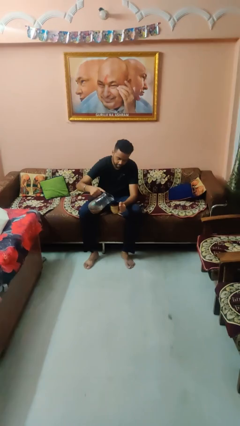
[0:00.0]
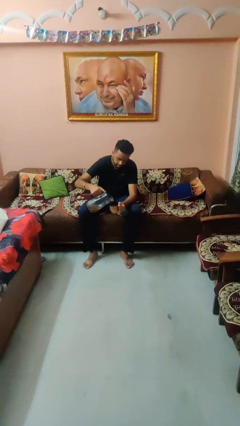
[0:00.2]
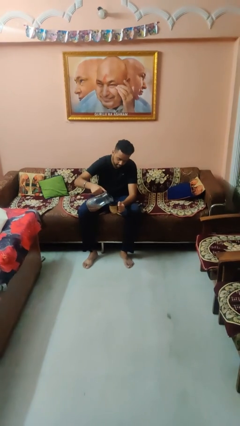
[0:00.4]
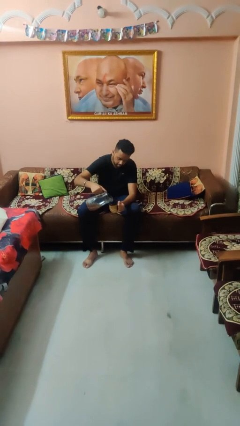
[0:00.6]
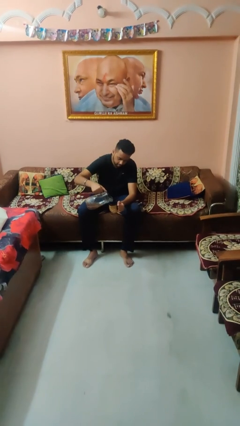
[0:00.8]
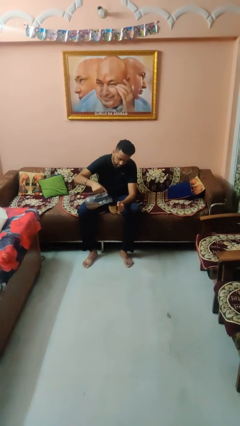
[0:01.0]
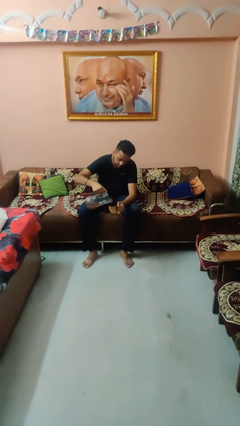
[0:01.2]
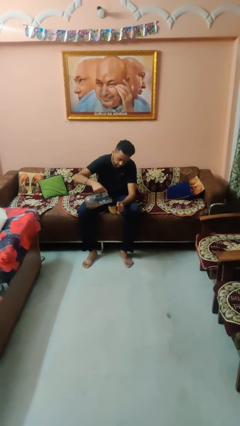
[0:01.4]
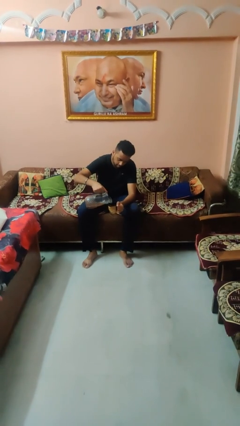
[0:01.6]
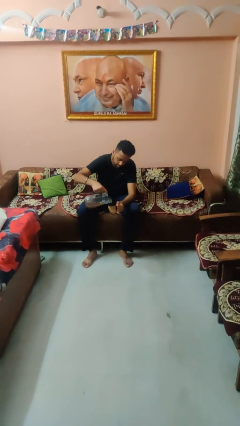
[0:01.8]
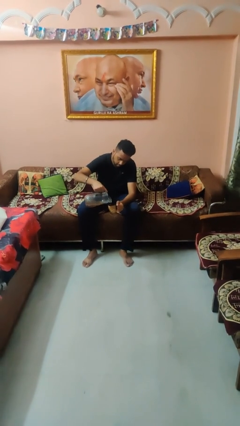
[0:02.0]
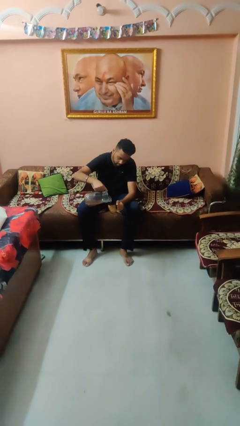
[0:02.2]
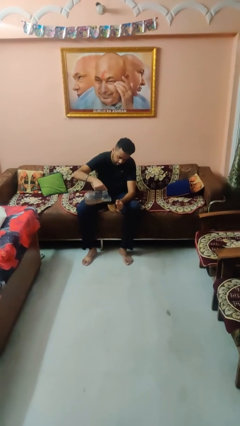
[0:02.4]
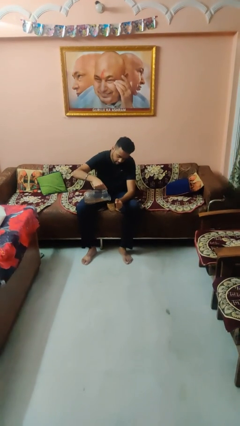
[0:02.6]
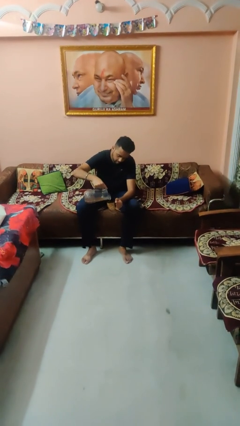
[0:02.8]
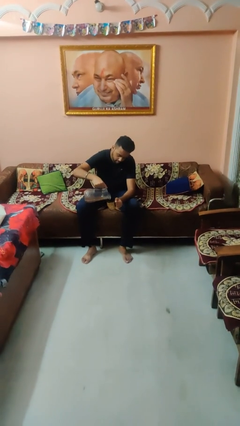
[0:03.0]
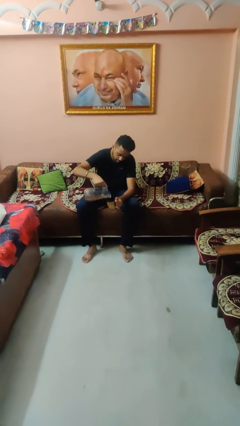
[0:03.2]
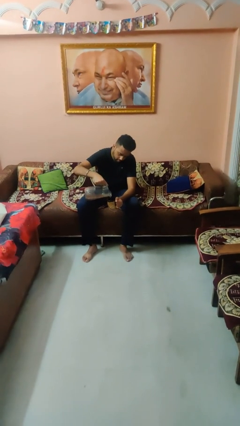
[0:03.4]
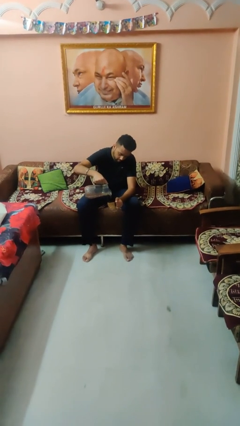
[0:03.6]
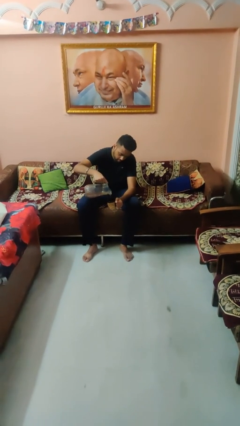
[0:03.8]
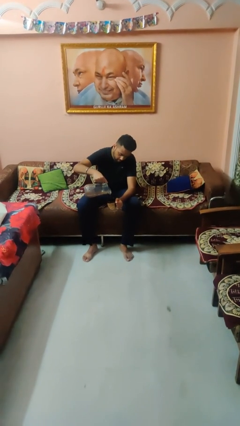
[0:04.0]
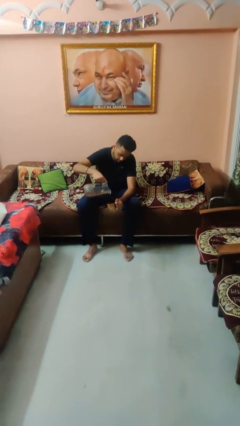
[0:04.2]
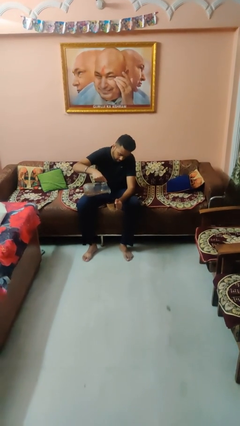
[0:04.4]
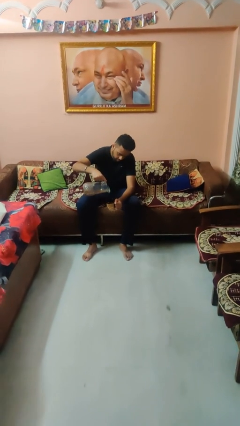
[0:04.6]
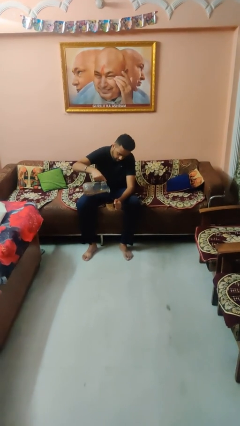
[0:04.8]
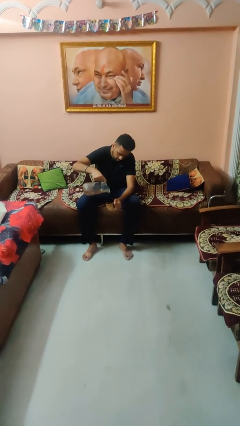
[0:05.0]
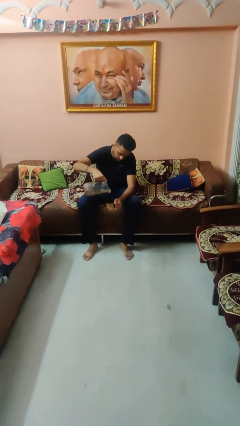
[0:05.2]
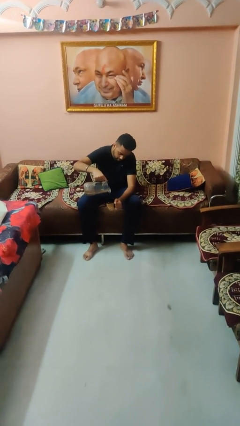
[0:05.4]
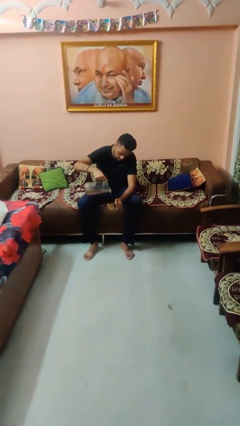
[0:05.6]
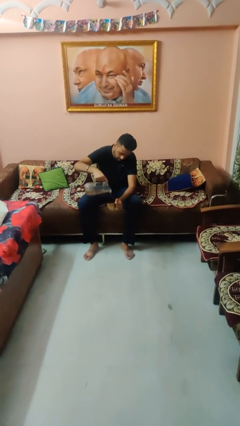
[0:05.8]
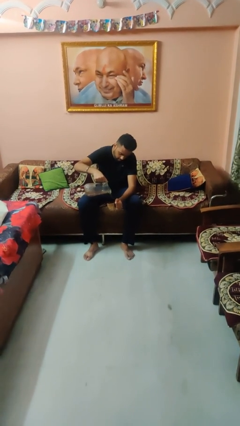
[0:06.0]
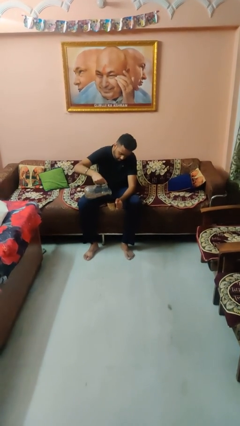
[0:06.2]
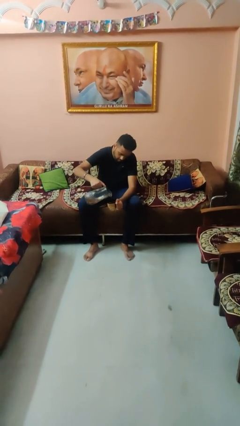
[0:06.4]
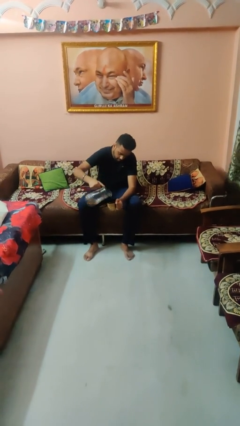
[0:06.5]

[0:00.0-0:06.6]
person pours coffee into mug

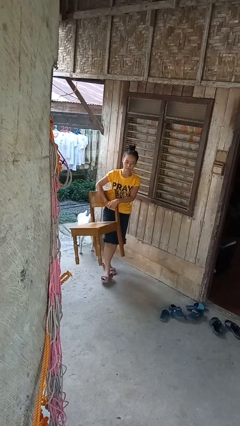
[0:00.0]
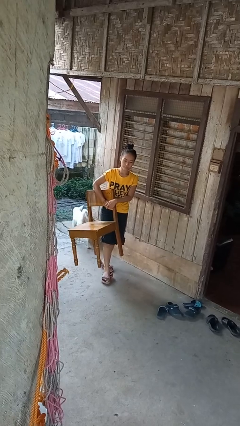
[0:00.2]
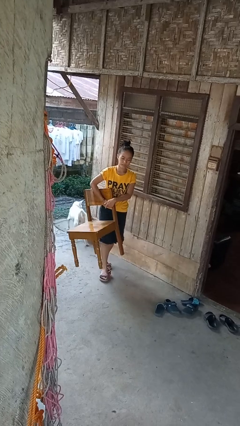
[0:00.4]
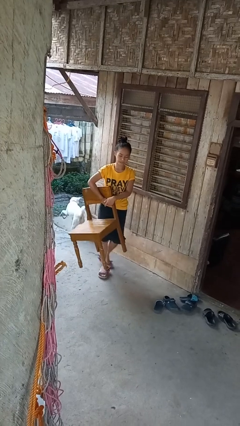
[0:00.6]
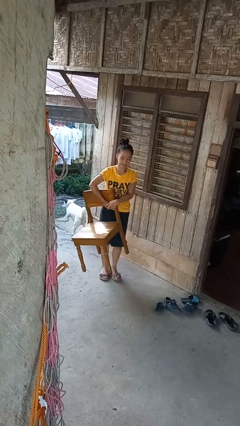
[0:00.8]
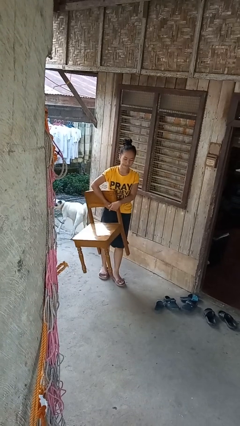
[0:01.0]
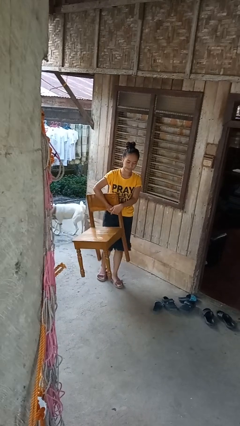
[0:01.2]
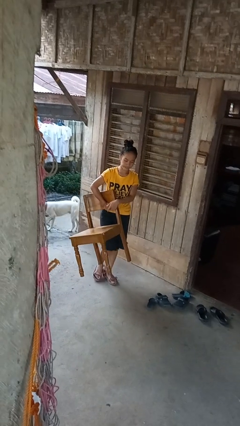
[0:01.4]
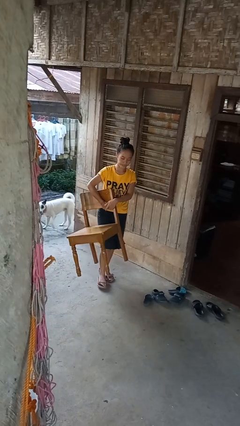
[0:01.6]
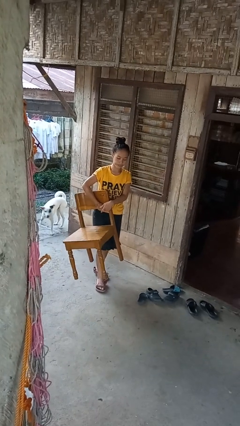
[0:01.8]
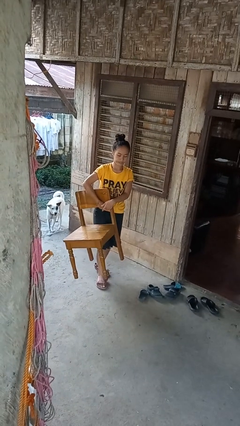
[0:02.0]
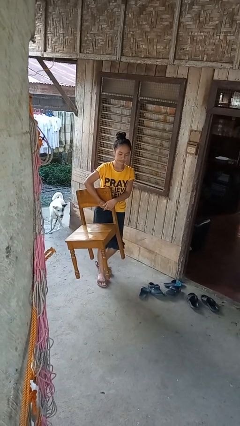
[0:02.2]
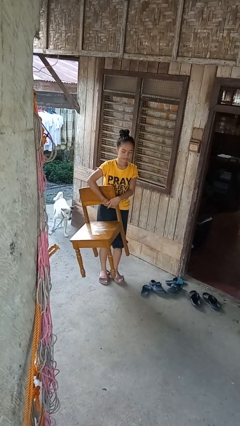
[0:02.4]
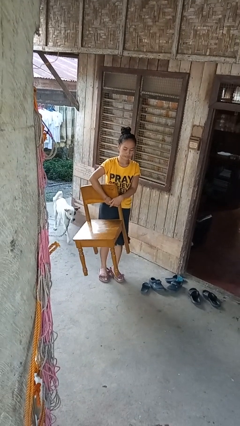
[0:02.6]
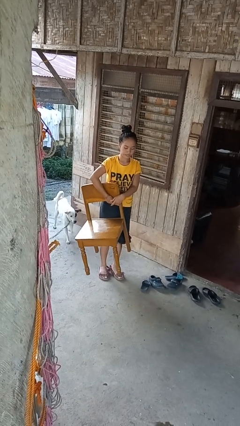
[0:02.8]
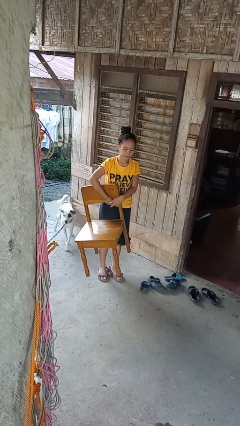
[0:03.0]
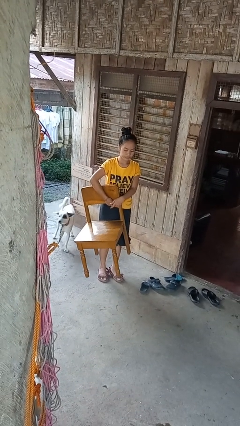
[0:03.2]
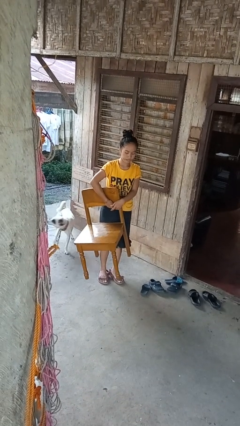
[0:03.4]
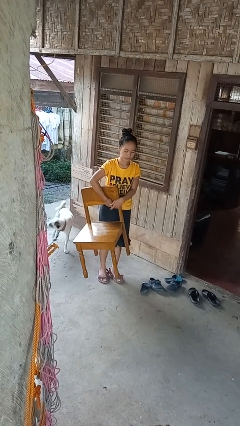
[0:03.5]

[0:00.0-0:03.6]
person carries furniture

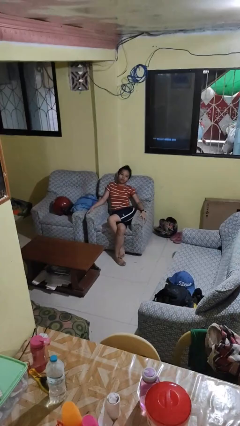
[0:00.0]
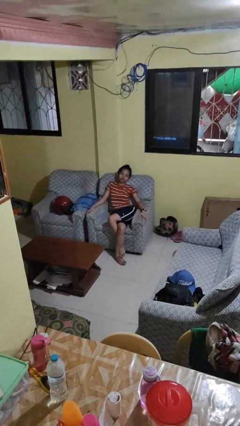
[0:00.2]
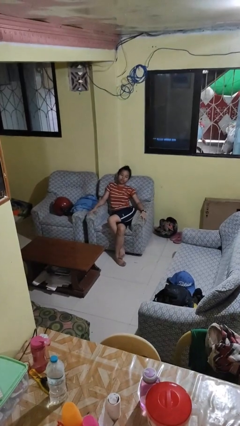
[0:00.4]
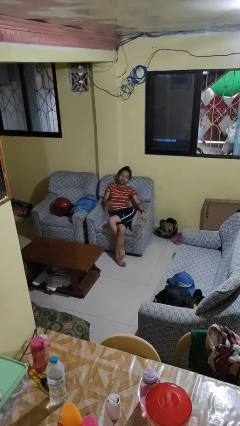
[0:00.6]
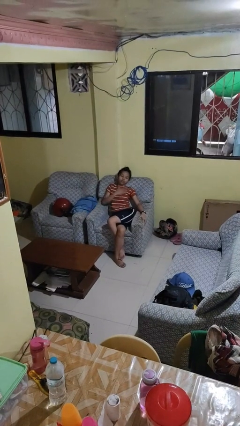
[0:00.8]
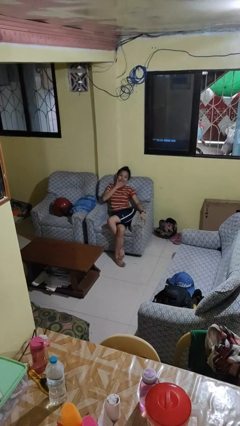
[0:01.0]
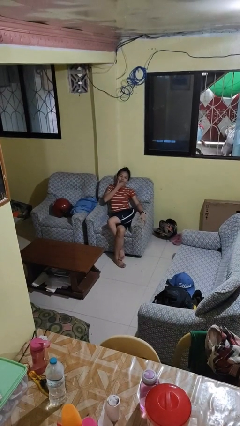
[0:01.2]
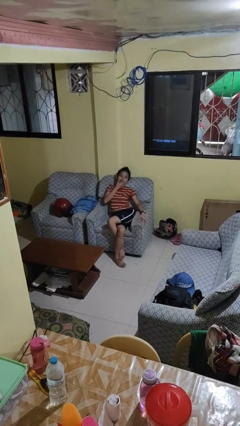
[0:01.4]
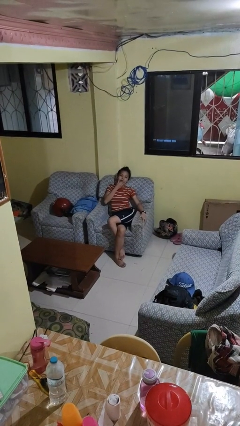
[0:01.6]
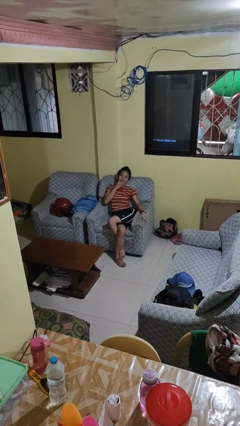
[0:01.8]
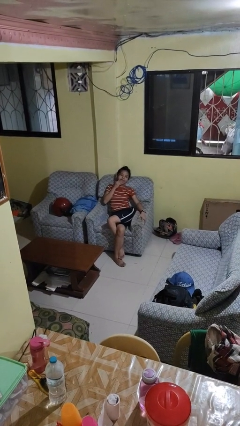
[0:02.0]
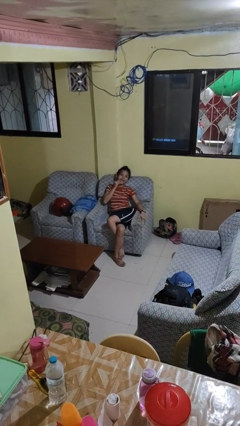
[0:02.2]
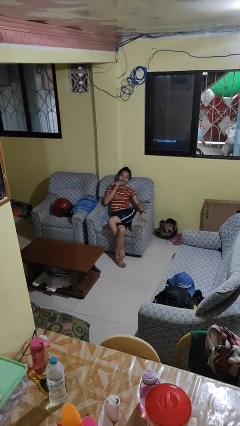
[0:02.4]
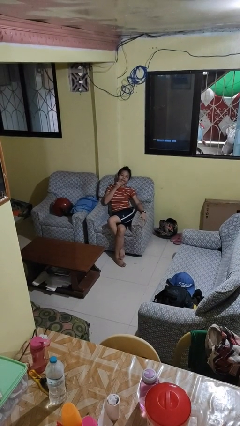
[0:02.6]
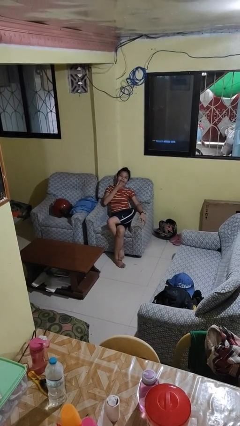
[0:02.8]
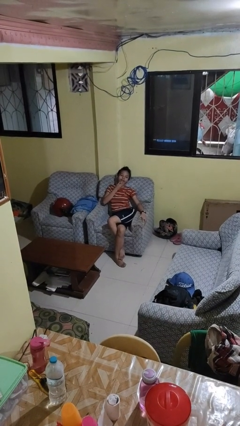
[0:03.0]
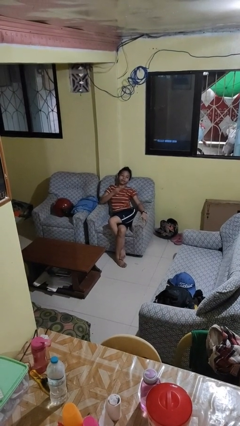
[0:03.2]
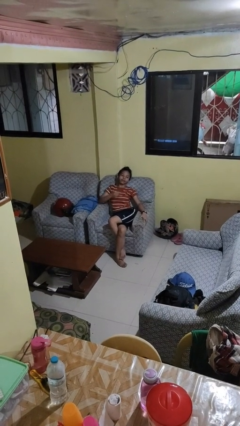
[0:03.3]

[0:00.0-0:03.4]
person strokes chin

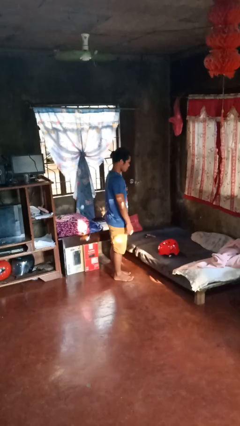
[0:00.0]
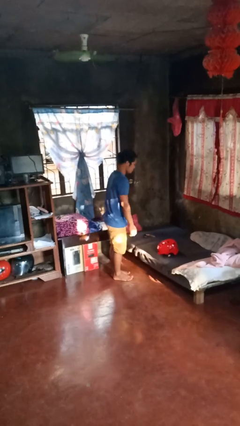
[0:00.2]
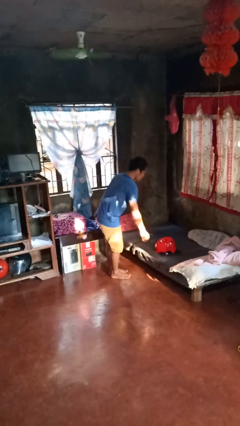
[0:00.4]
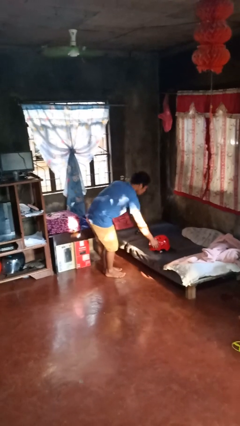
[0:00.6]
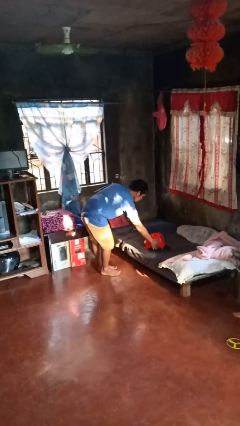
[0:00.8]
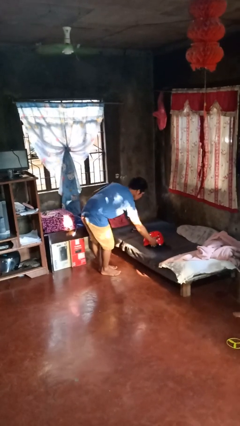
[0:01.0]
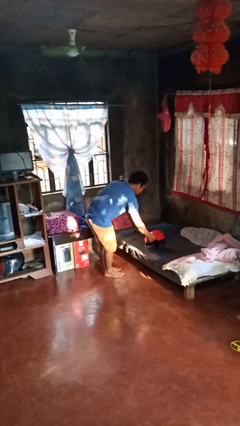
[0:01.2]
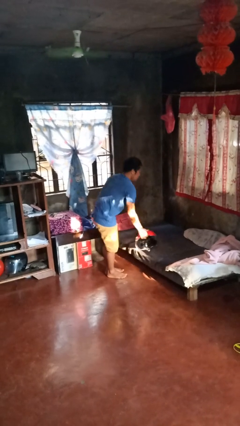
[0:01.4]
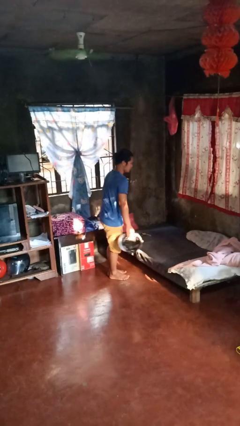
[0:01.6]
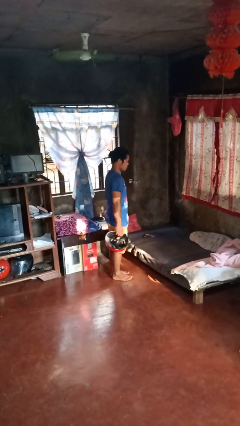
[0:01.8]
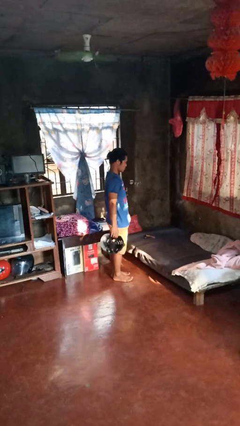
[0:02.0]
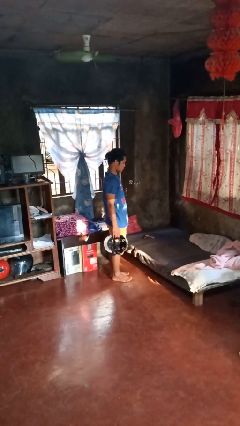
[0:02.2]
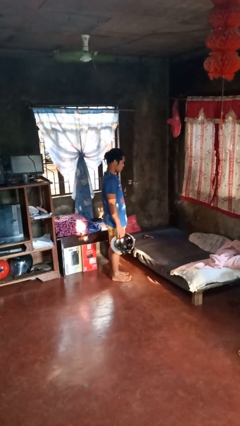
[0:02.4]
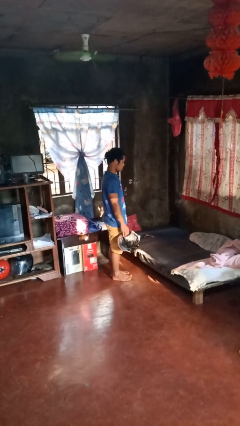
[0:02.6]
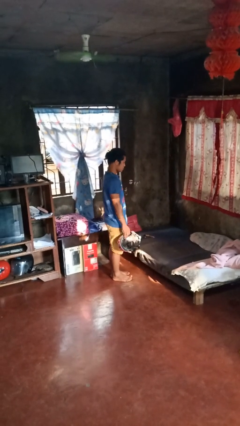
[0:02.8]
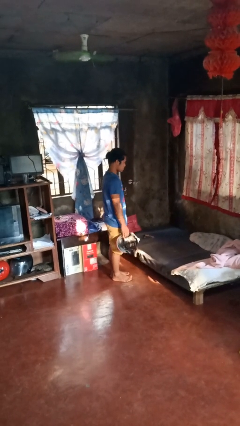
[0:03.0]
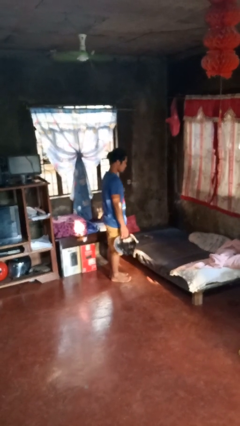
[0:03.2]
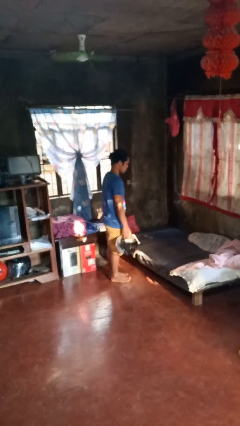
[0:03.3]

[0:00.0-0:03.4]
person picks up object from bed

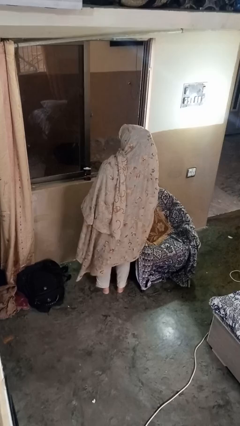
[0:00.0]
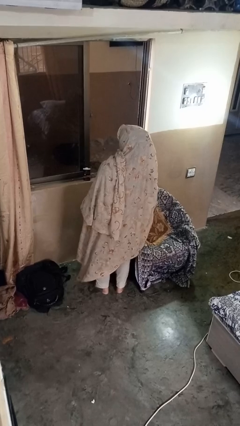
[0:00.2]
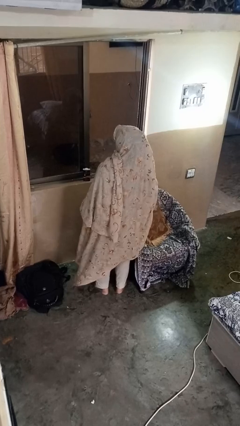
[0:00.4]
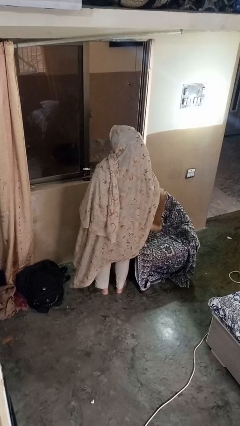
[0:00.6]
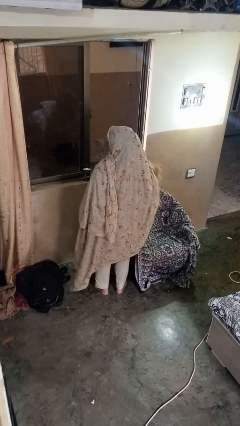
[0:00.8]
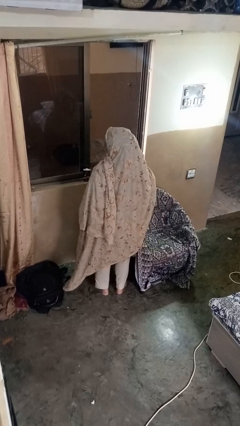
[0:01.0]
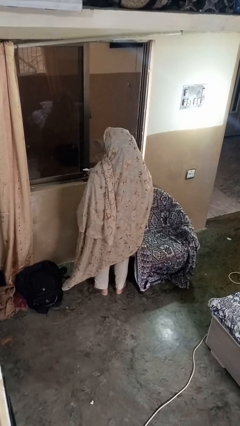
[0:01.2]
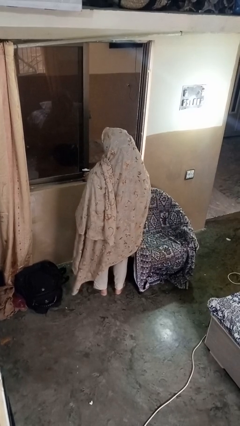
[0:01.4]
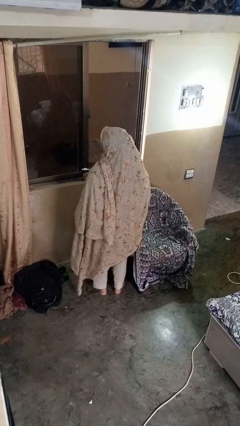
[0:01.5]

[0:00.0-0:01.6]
person picks up object from couch
